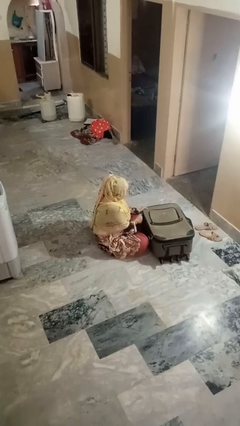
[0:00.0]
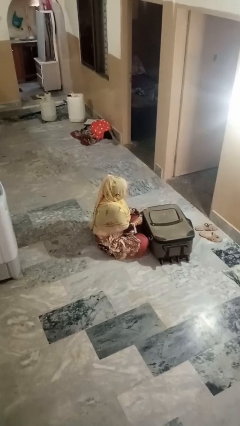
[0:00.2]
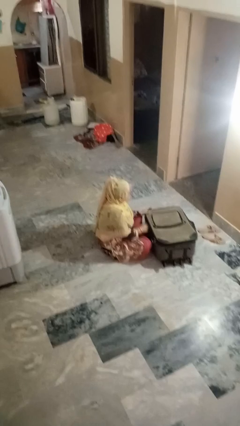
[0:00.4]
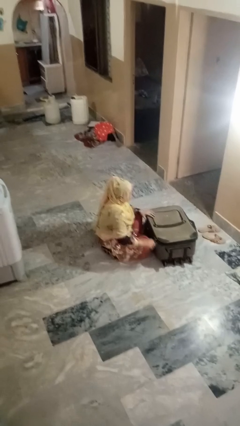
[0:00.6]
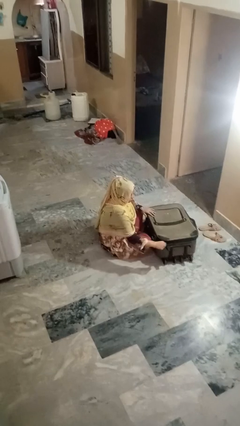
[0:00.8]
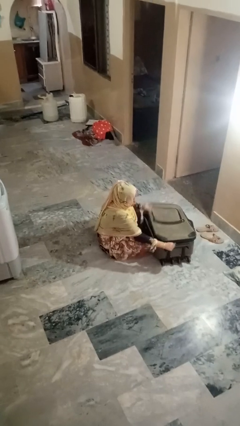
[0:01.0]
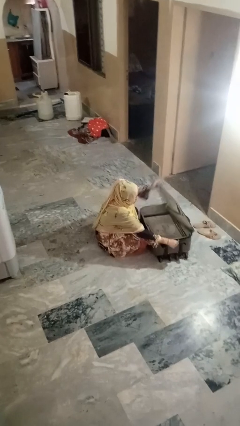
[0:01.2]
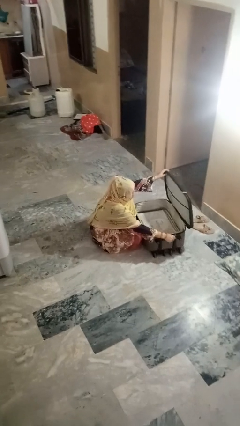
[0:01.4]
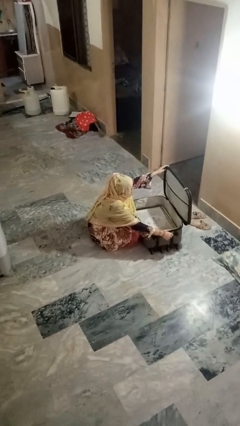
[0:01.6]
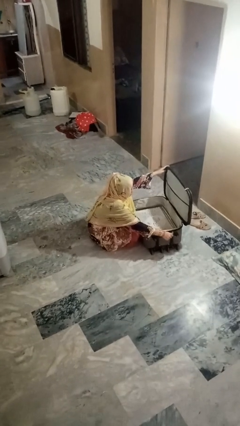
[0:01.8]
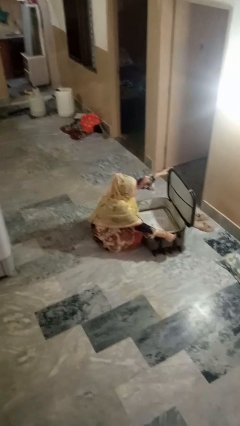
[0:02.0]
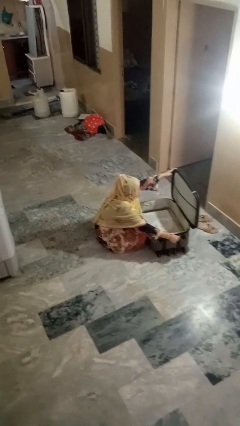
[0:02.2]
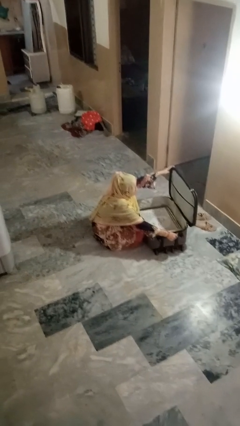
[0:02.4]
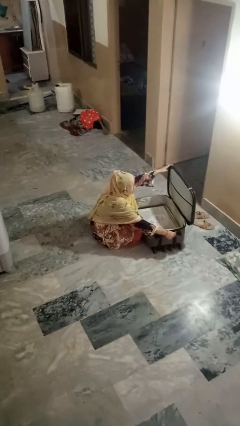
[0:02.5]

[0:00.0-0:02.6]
person opens suitcase

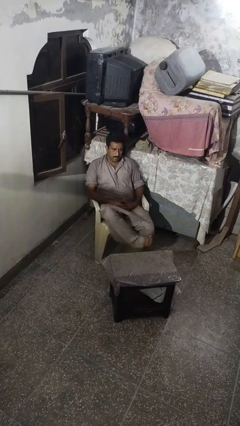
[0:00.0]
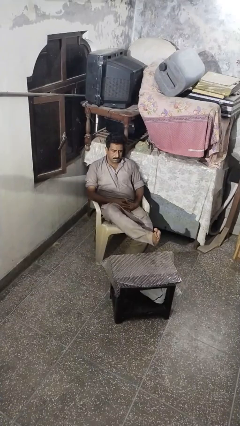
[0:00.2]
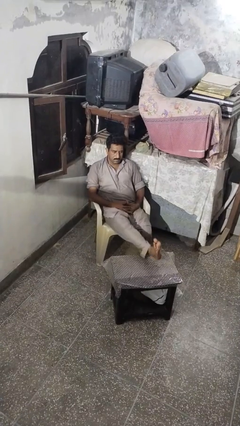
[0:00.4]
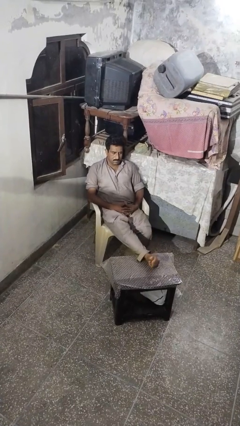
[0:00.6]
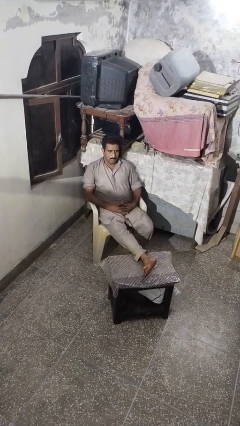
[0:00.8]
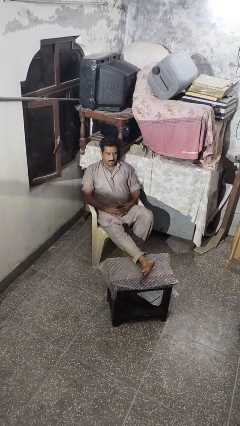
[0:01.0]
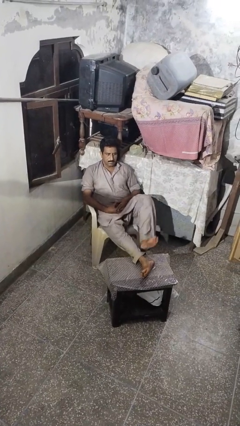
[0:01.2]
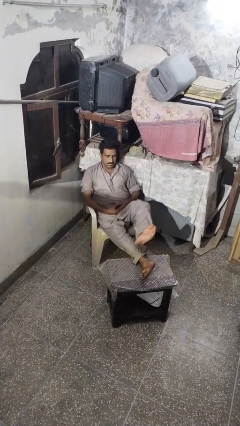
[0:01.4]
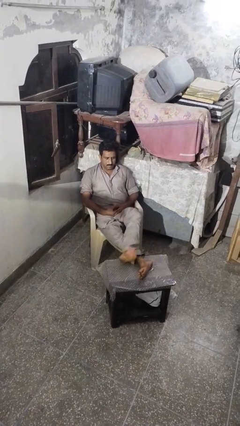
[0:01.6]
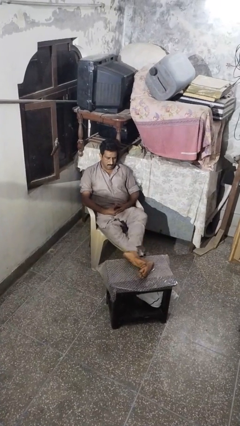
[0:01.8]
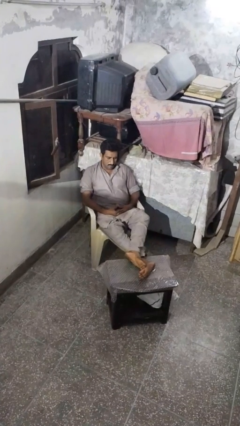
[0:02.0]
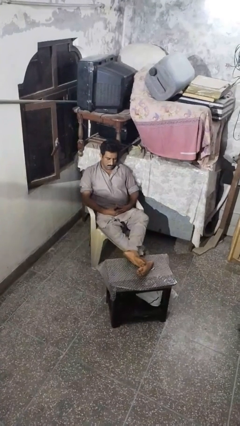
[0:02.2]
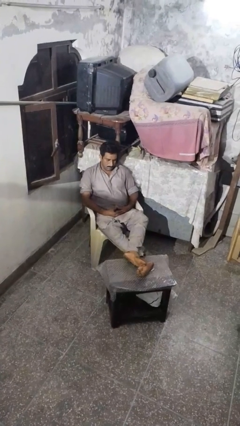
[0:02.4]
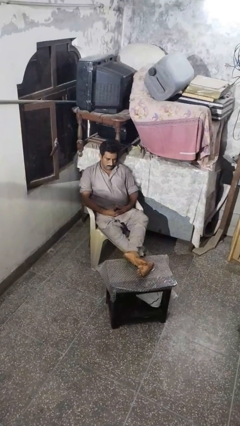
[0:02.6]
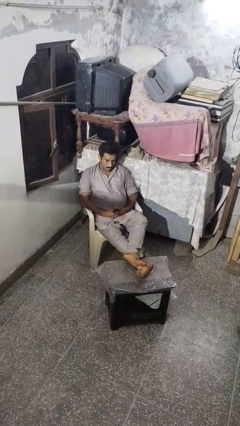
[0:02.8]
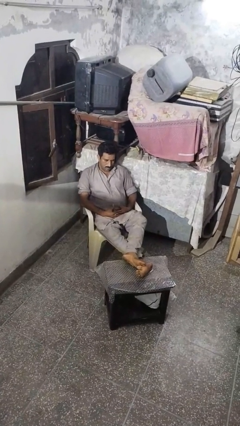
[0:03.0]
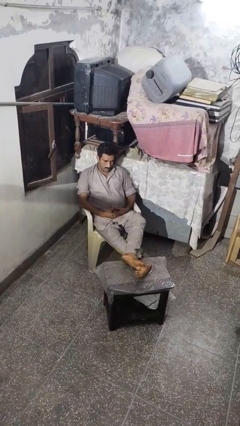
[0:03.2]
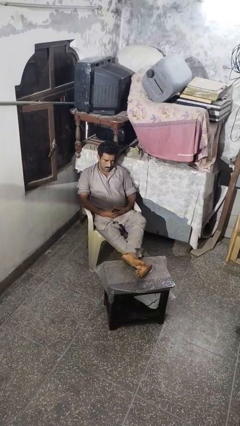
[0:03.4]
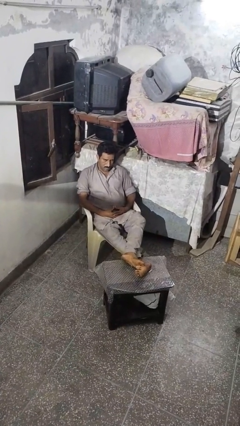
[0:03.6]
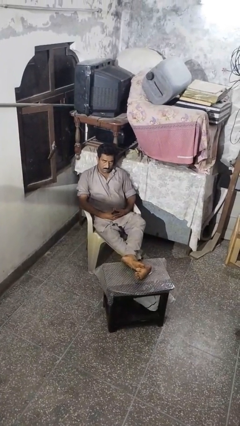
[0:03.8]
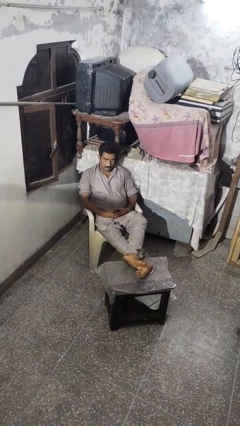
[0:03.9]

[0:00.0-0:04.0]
person puts feet up

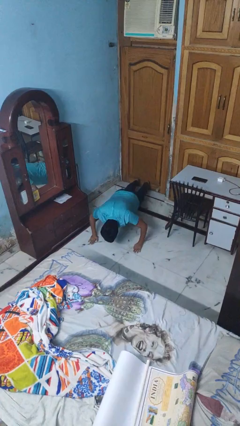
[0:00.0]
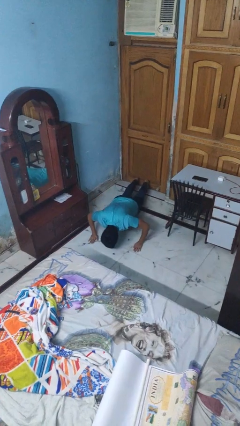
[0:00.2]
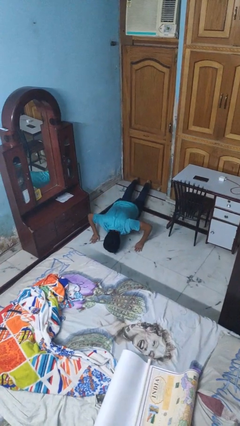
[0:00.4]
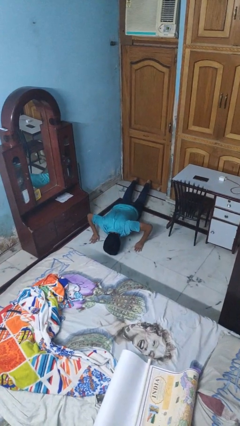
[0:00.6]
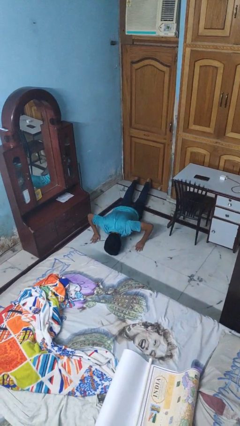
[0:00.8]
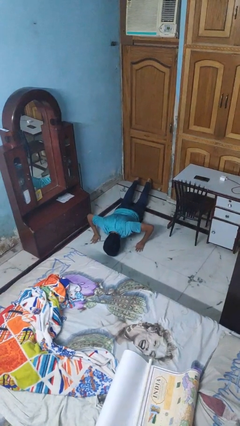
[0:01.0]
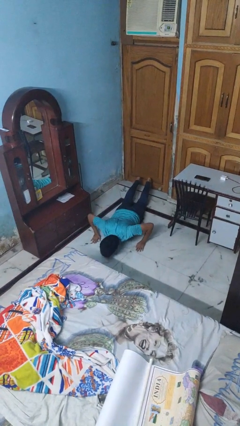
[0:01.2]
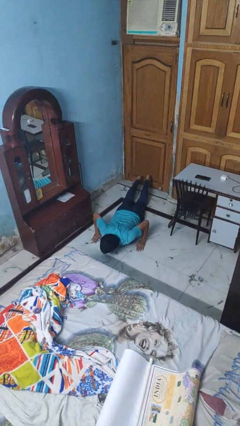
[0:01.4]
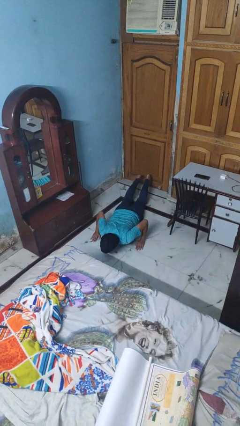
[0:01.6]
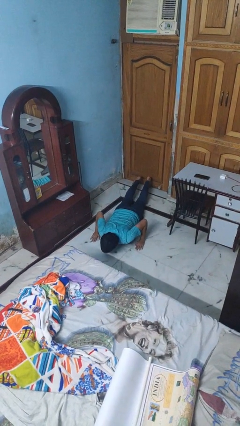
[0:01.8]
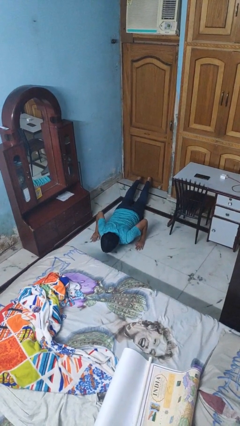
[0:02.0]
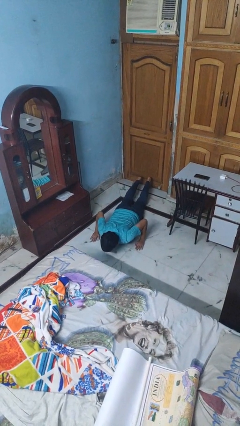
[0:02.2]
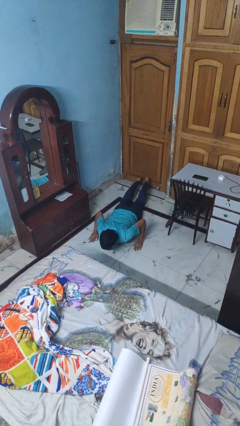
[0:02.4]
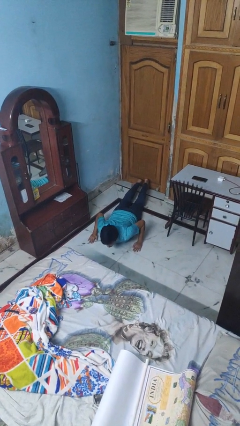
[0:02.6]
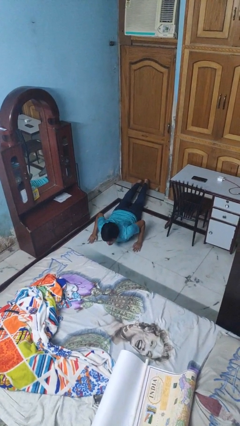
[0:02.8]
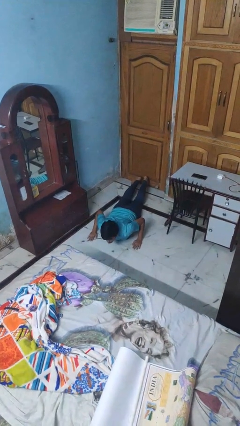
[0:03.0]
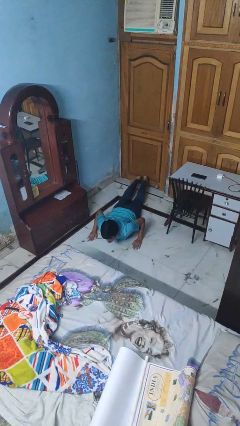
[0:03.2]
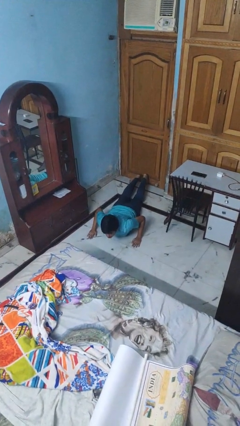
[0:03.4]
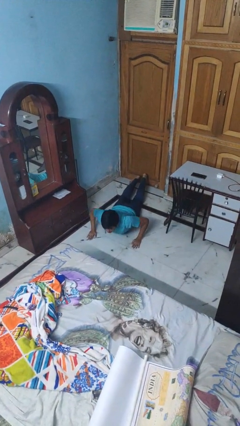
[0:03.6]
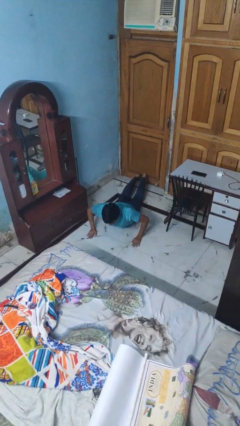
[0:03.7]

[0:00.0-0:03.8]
person exercises with pushup

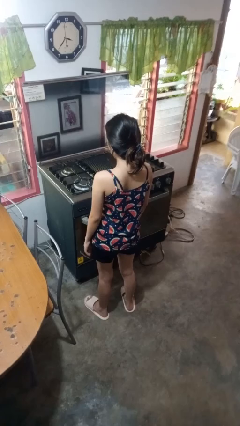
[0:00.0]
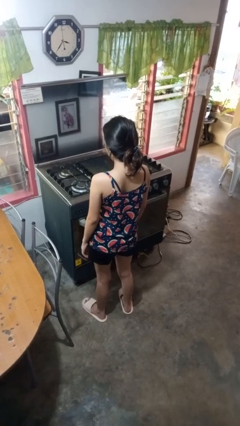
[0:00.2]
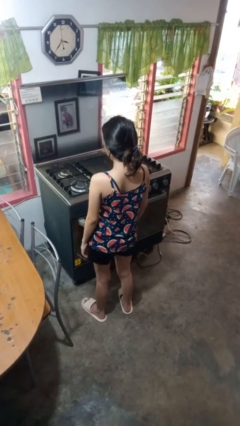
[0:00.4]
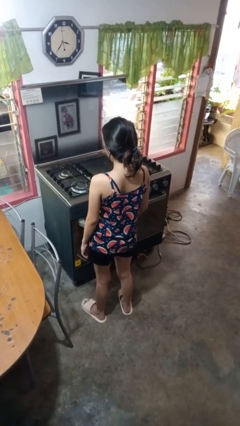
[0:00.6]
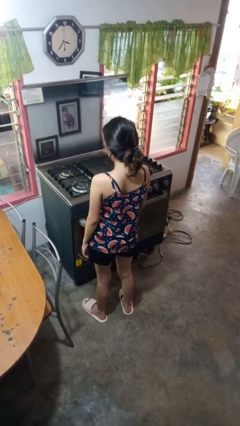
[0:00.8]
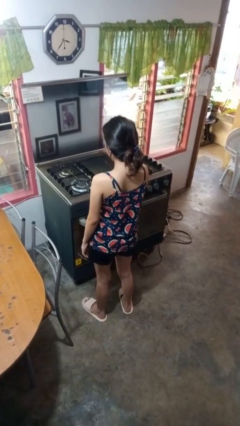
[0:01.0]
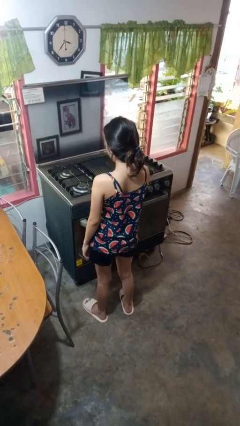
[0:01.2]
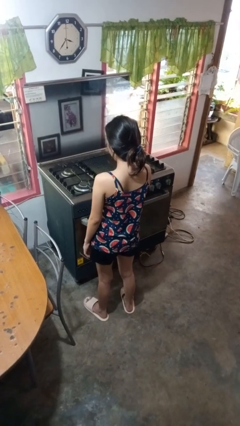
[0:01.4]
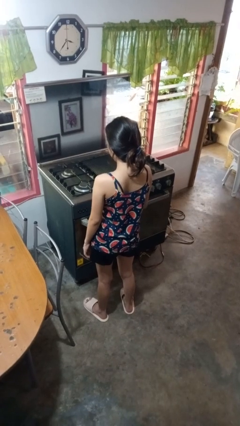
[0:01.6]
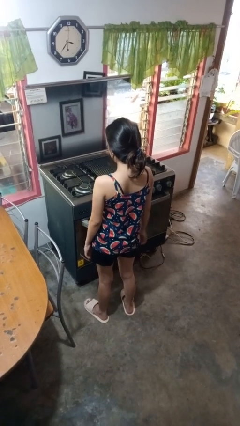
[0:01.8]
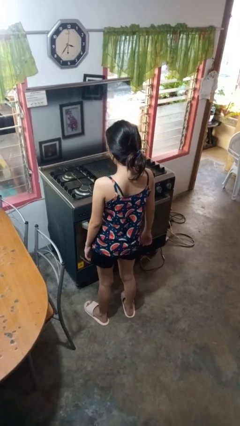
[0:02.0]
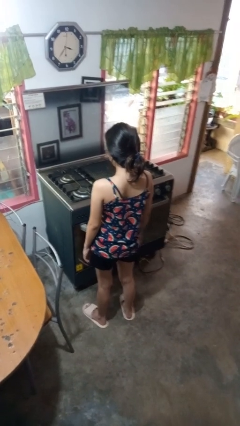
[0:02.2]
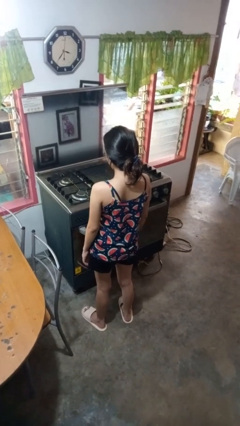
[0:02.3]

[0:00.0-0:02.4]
person turns off stovetop

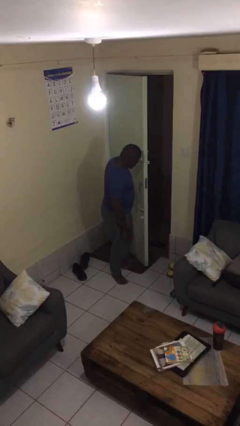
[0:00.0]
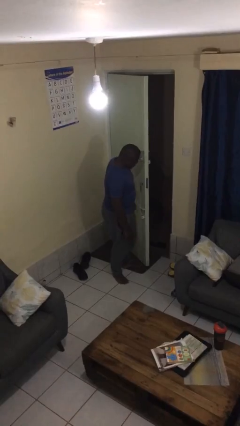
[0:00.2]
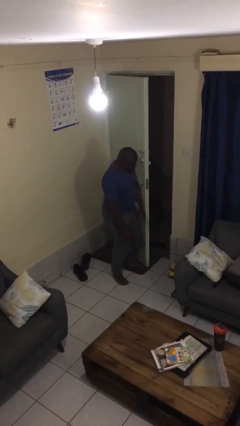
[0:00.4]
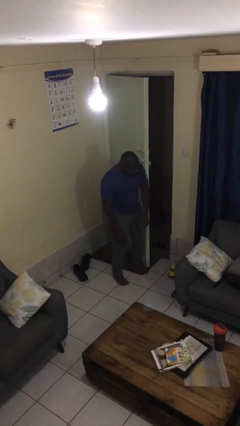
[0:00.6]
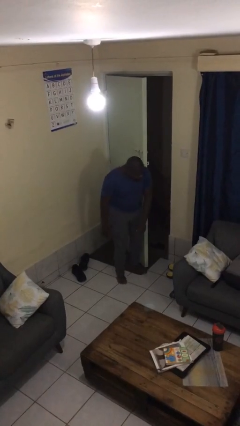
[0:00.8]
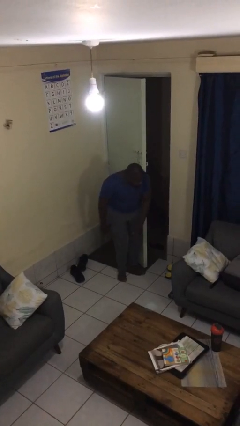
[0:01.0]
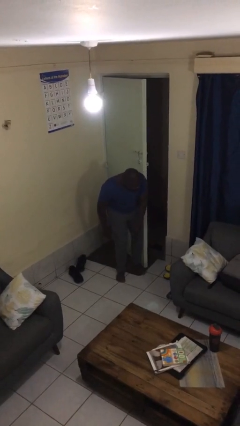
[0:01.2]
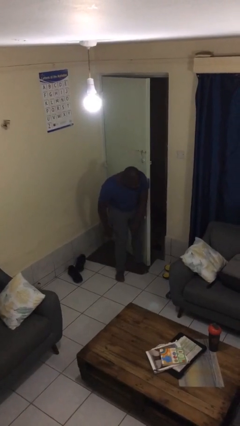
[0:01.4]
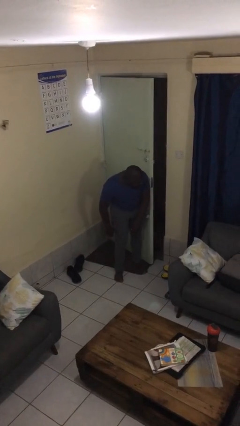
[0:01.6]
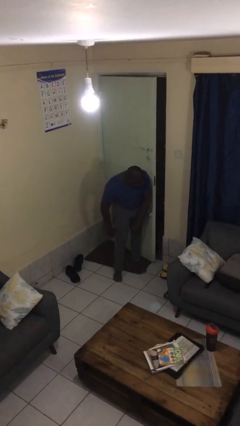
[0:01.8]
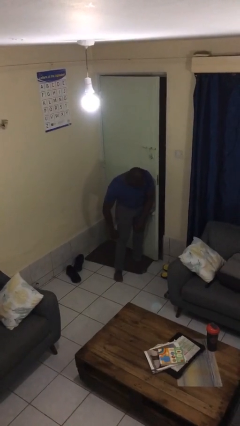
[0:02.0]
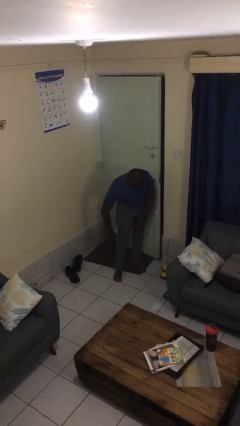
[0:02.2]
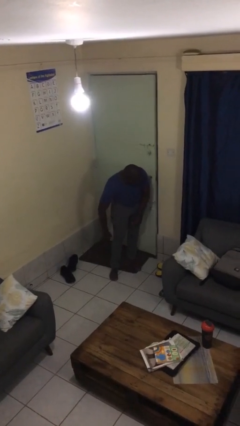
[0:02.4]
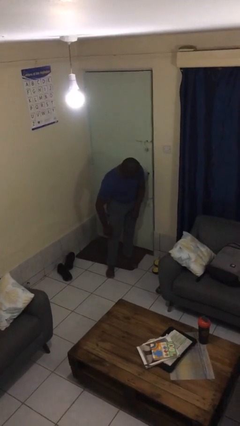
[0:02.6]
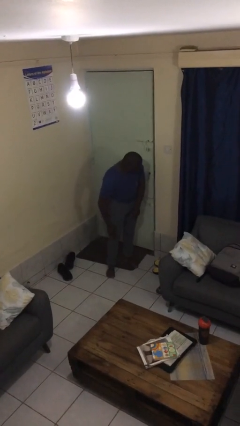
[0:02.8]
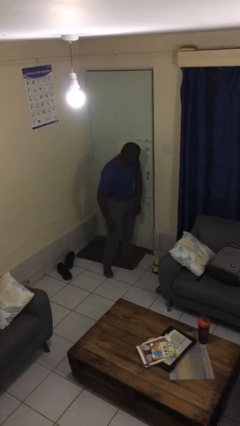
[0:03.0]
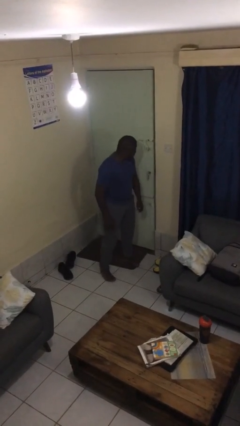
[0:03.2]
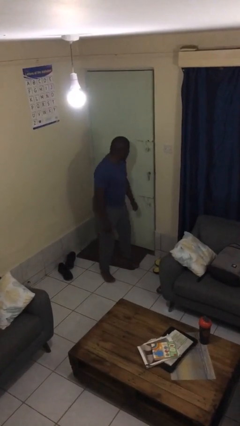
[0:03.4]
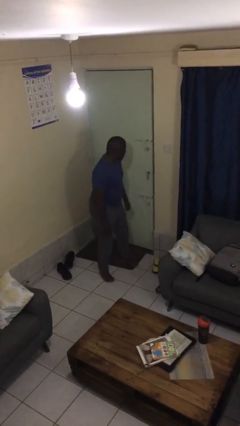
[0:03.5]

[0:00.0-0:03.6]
person closes door with hip

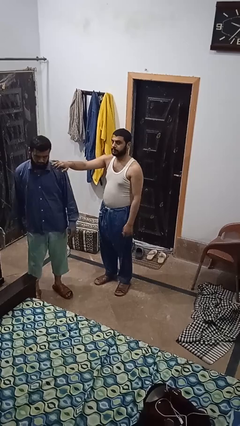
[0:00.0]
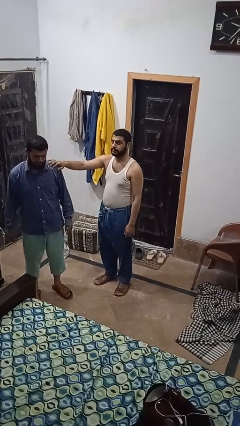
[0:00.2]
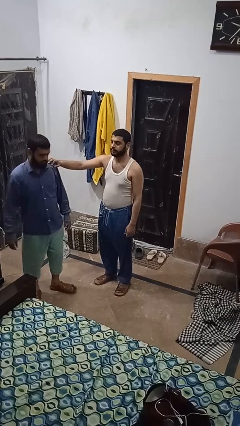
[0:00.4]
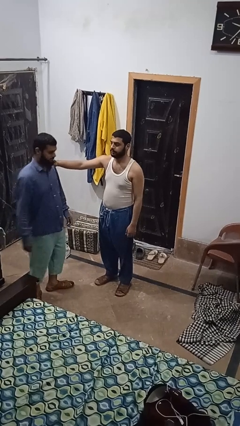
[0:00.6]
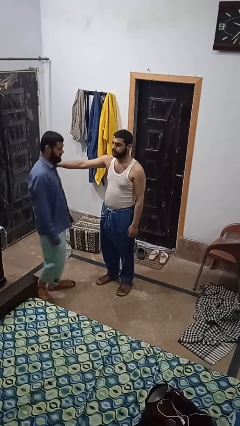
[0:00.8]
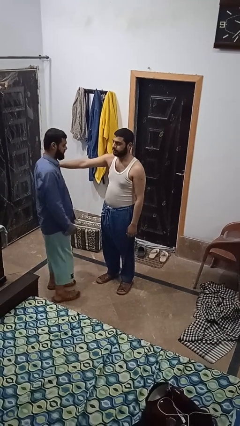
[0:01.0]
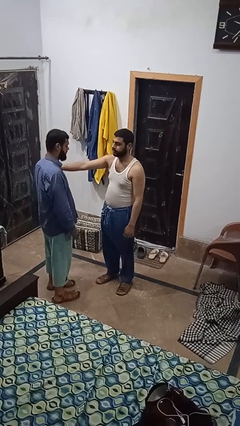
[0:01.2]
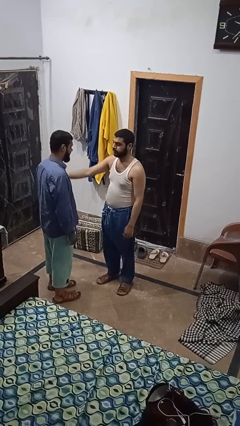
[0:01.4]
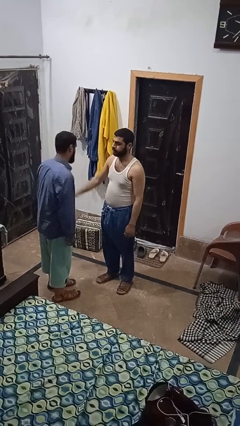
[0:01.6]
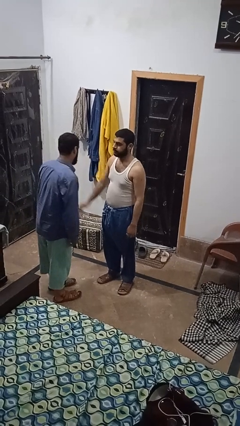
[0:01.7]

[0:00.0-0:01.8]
person spins person around
